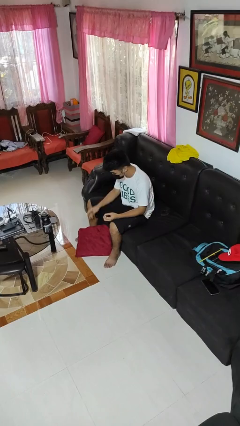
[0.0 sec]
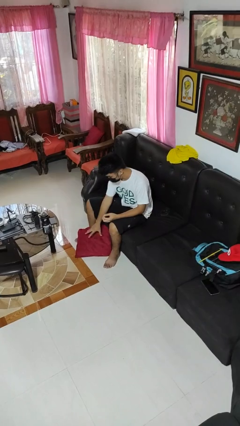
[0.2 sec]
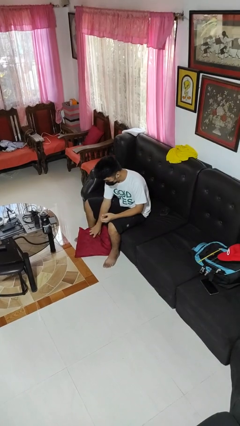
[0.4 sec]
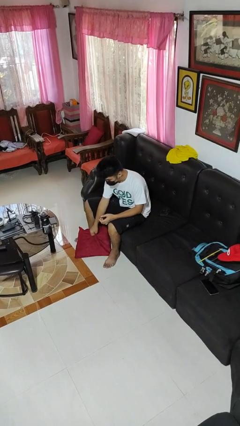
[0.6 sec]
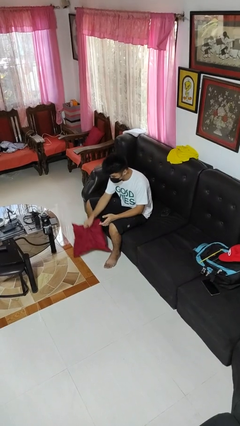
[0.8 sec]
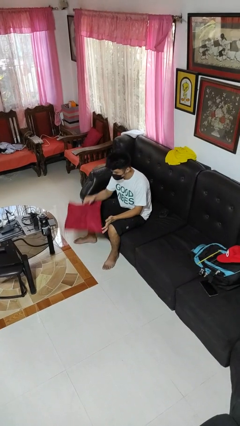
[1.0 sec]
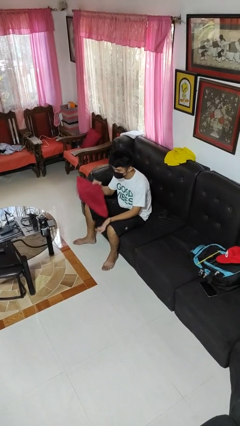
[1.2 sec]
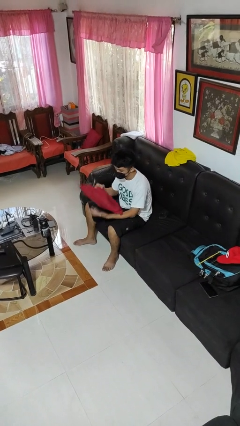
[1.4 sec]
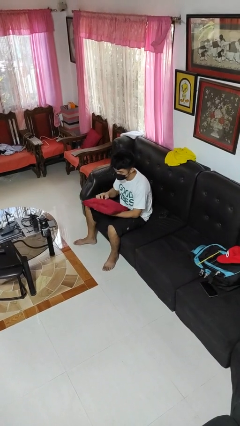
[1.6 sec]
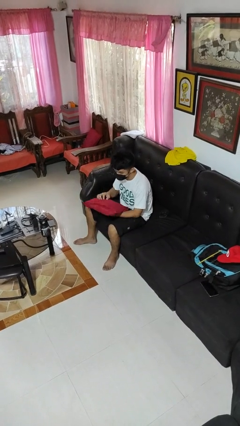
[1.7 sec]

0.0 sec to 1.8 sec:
person picks up object from floor

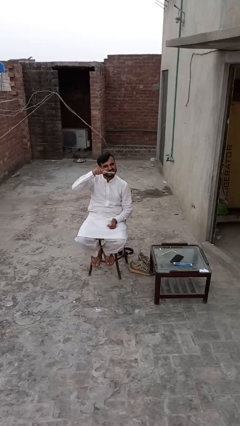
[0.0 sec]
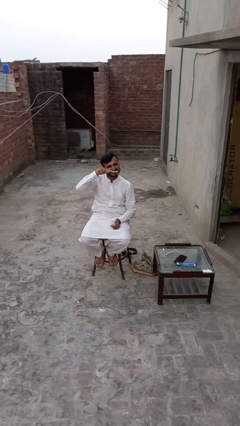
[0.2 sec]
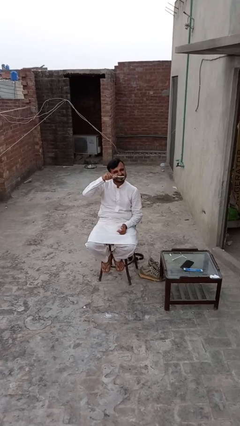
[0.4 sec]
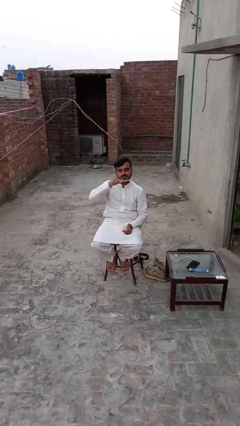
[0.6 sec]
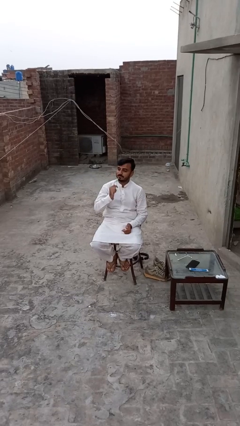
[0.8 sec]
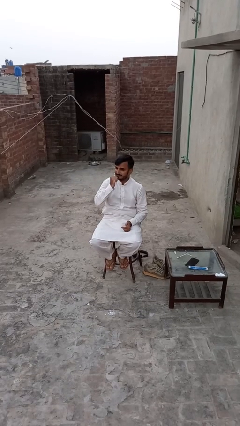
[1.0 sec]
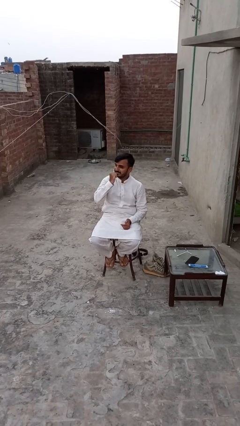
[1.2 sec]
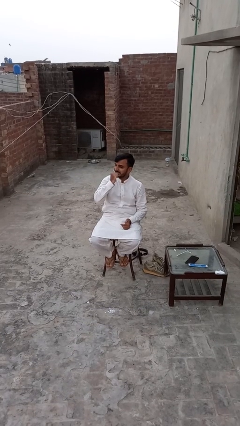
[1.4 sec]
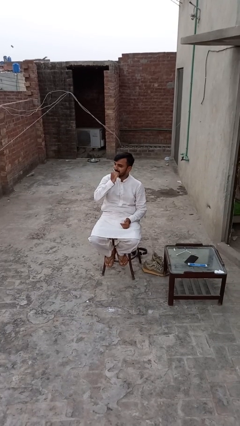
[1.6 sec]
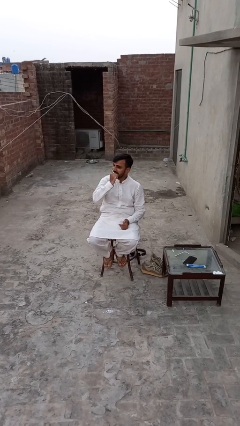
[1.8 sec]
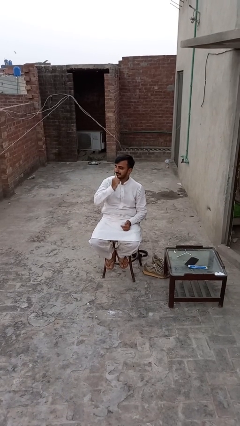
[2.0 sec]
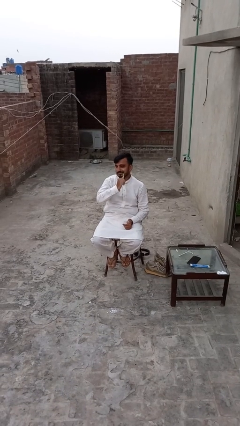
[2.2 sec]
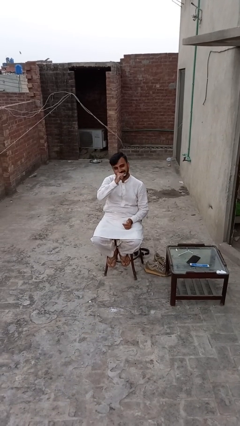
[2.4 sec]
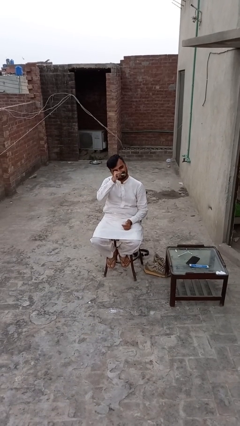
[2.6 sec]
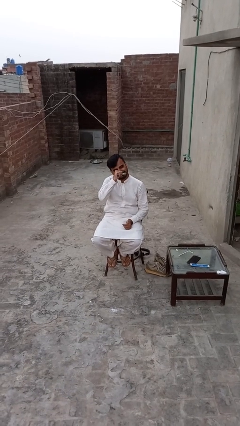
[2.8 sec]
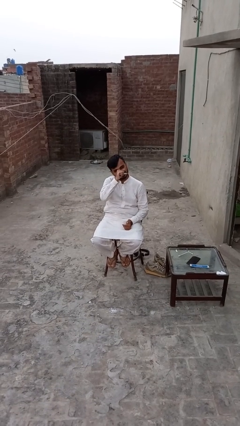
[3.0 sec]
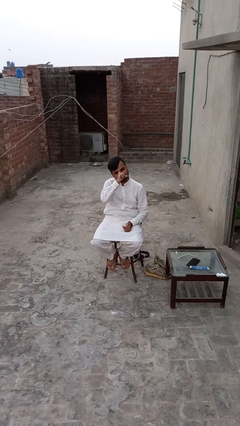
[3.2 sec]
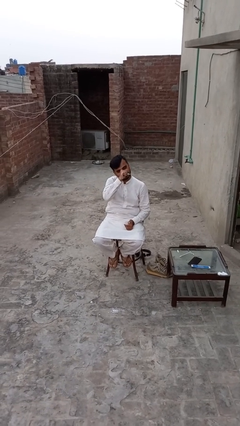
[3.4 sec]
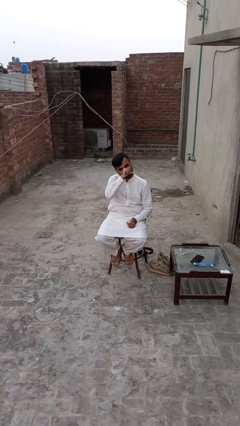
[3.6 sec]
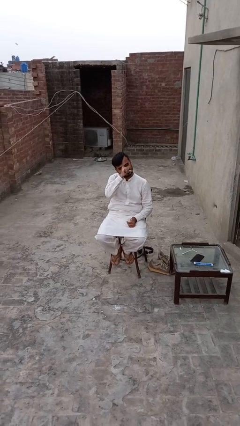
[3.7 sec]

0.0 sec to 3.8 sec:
person brushes teeth

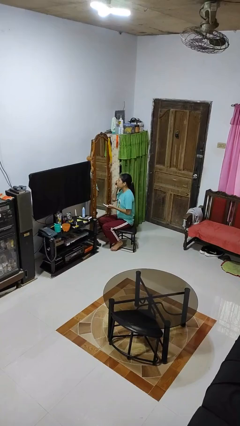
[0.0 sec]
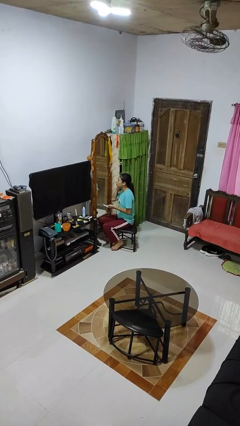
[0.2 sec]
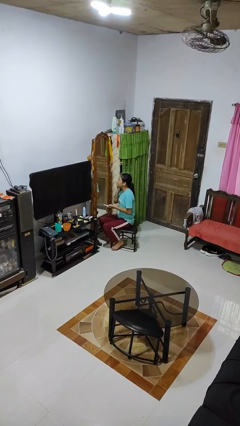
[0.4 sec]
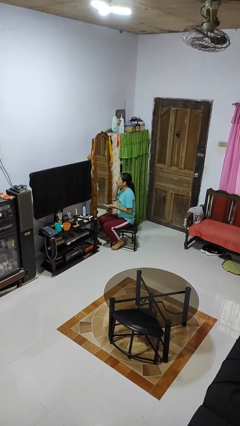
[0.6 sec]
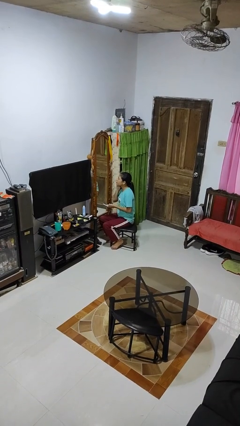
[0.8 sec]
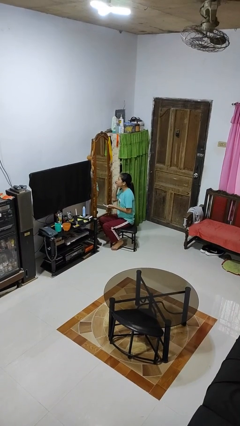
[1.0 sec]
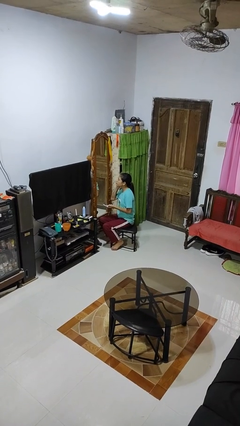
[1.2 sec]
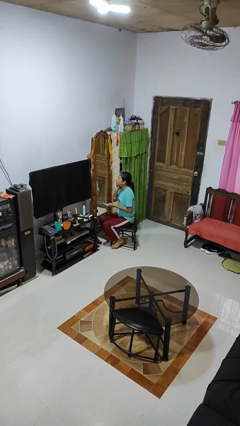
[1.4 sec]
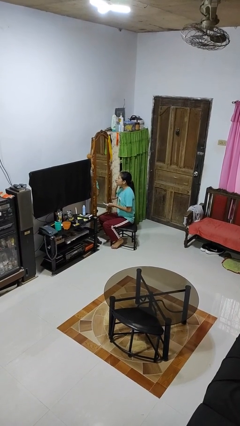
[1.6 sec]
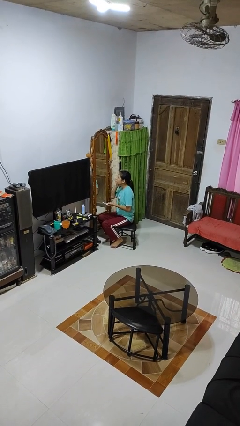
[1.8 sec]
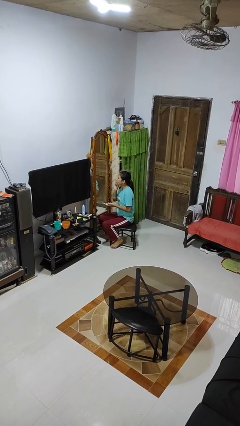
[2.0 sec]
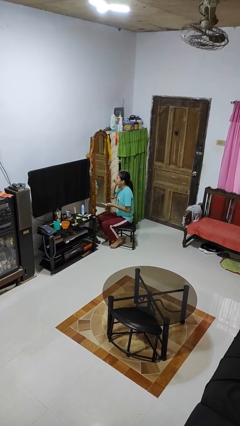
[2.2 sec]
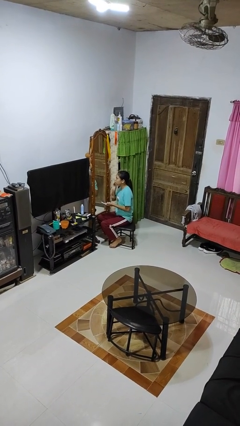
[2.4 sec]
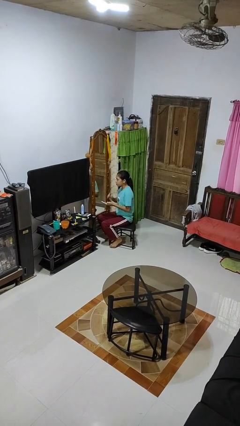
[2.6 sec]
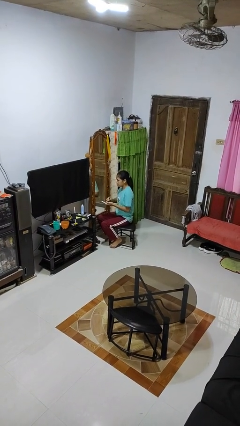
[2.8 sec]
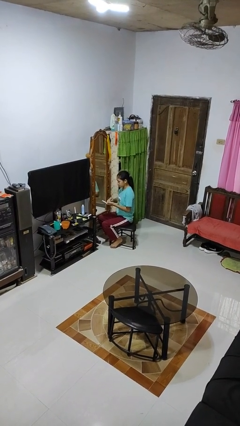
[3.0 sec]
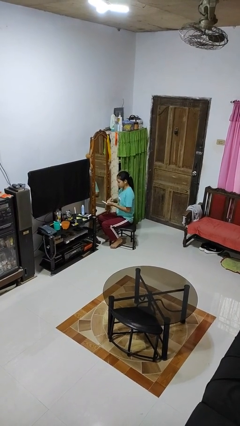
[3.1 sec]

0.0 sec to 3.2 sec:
person applies foundation makeup

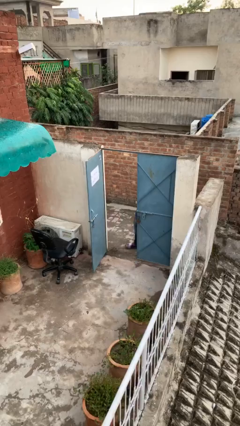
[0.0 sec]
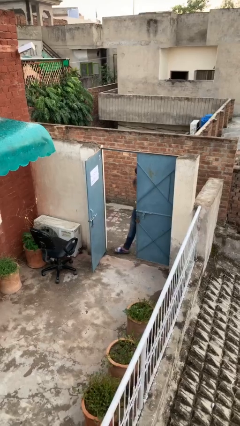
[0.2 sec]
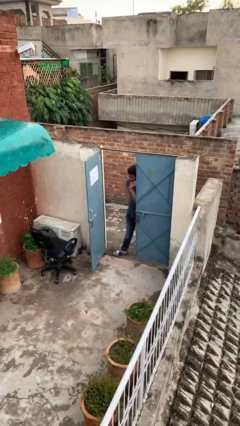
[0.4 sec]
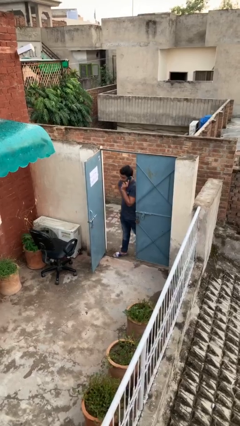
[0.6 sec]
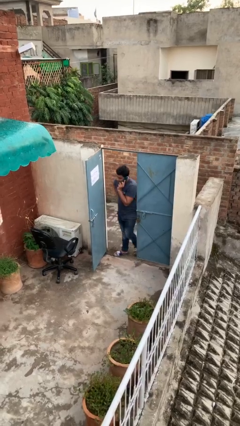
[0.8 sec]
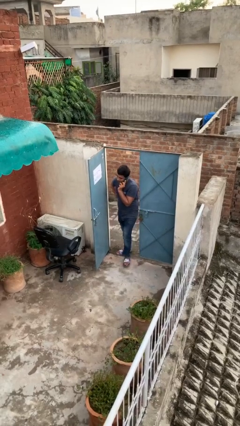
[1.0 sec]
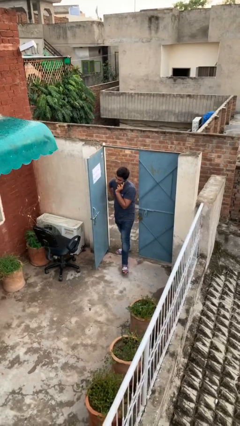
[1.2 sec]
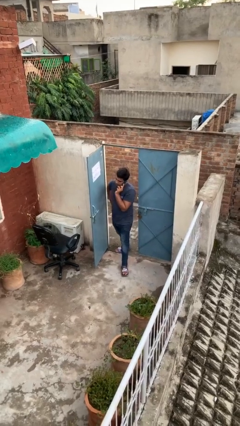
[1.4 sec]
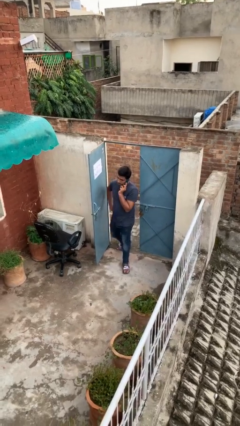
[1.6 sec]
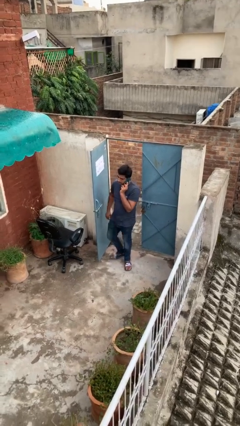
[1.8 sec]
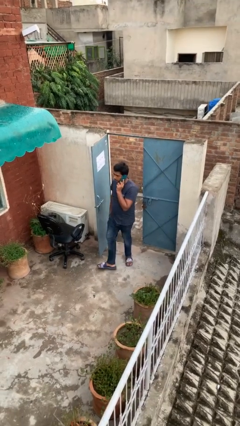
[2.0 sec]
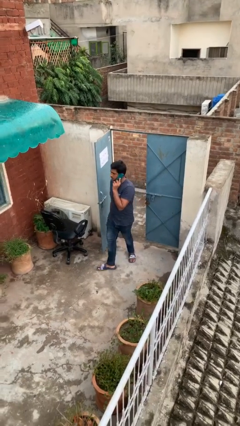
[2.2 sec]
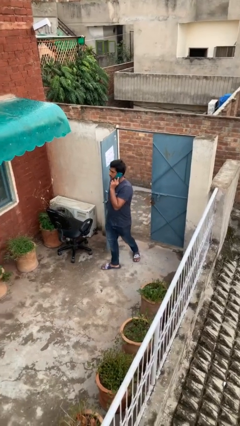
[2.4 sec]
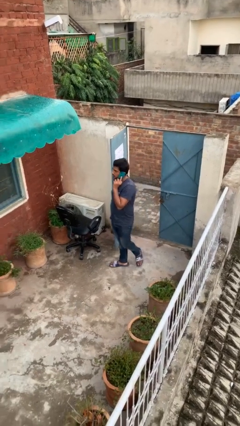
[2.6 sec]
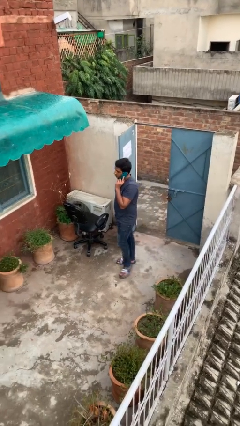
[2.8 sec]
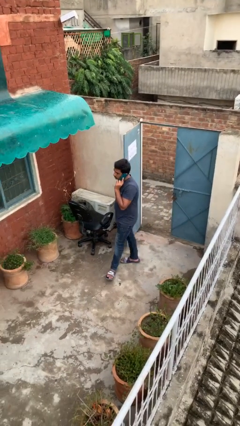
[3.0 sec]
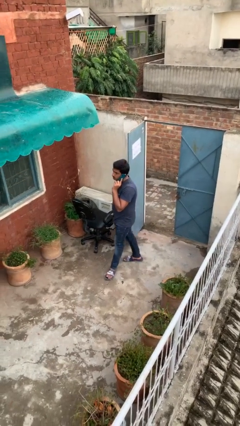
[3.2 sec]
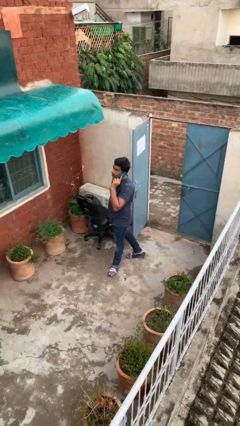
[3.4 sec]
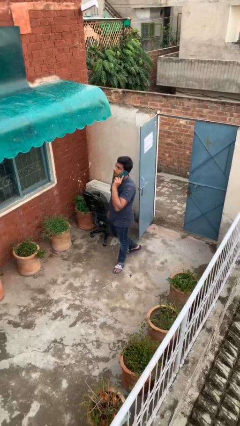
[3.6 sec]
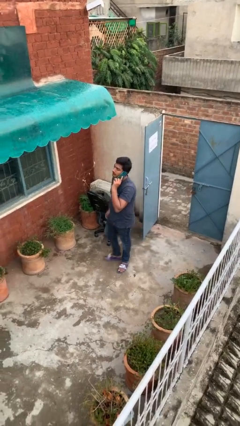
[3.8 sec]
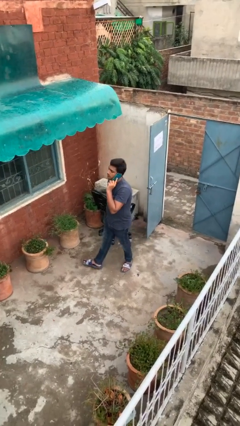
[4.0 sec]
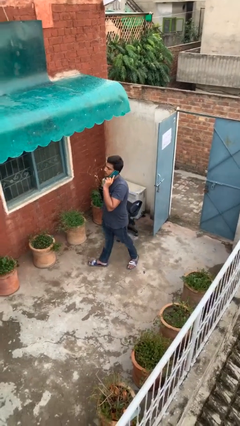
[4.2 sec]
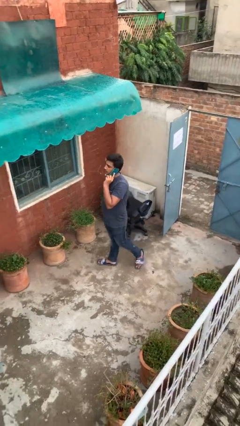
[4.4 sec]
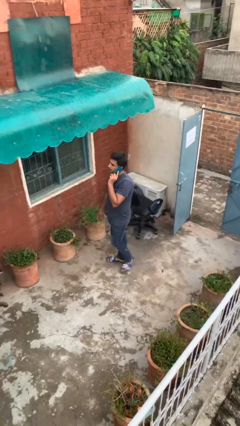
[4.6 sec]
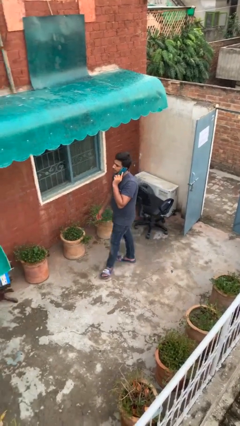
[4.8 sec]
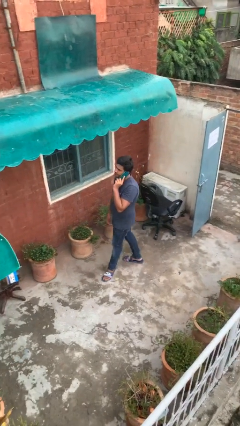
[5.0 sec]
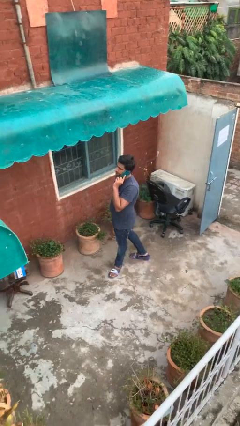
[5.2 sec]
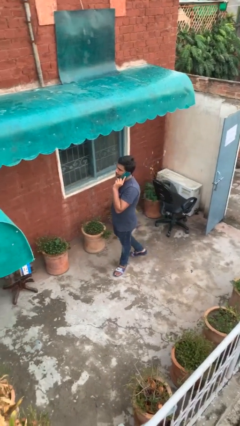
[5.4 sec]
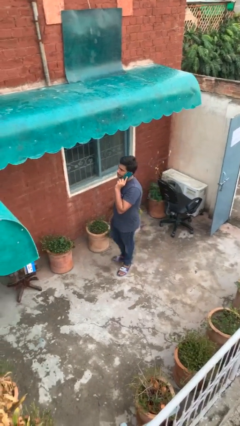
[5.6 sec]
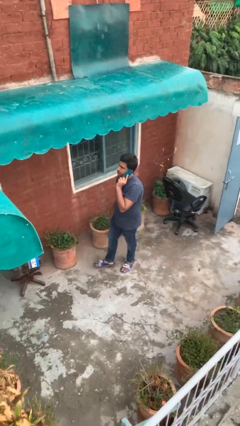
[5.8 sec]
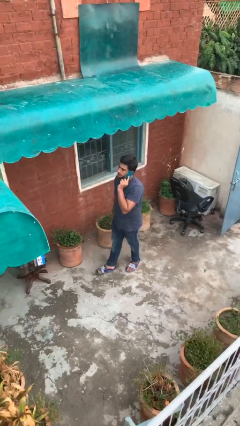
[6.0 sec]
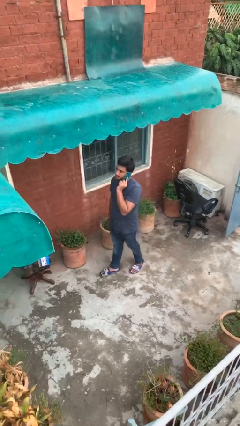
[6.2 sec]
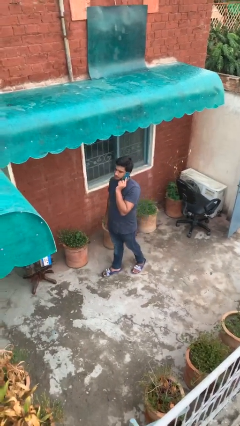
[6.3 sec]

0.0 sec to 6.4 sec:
person enters scene through structure

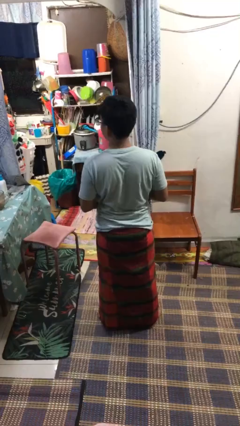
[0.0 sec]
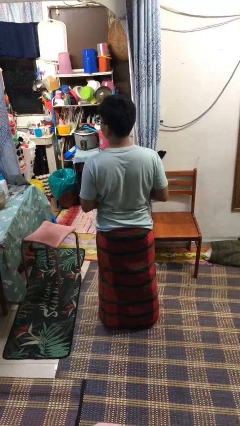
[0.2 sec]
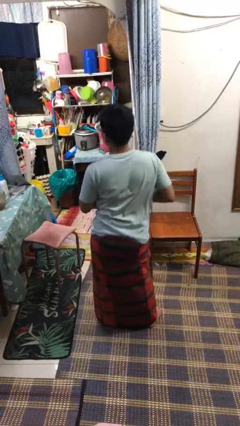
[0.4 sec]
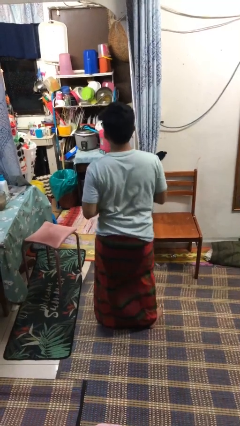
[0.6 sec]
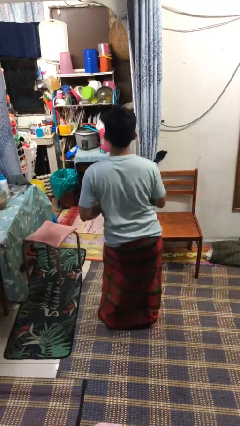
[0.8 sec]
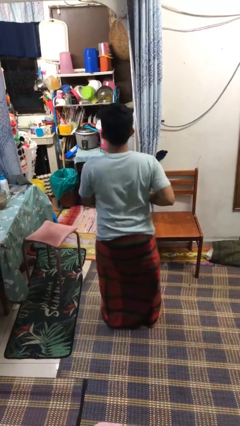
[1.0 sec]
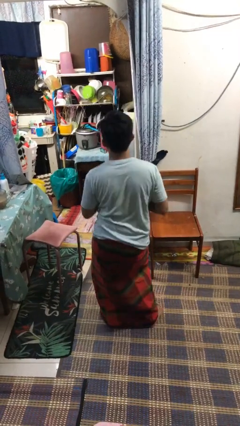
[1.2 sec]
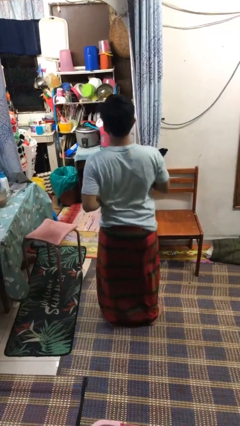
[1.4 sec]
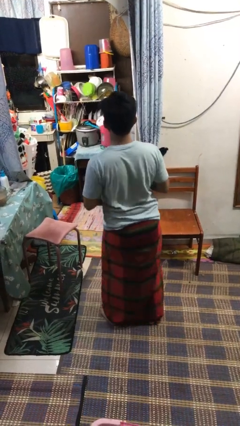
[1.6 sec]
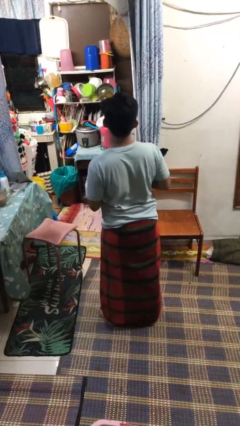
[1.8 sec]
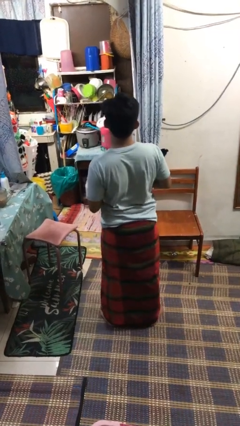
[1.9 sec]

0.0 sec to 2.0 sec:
person wiggles hips
